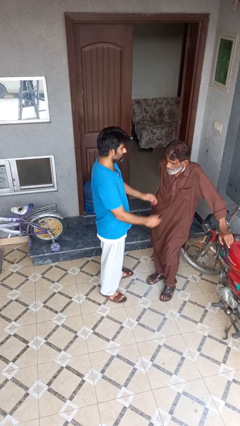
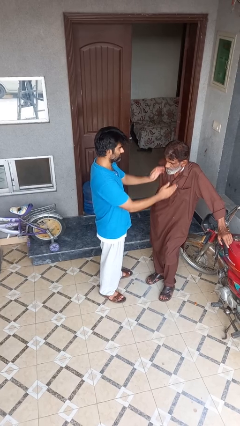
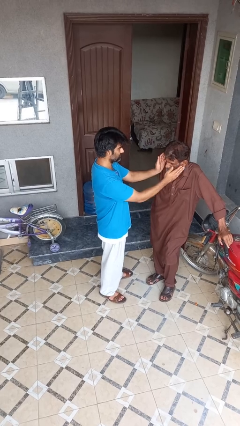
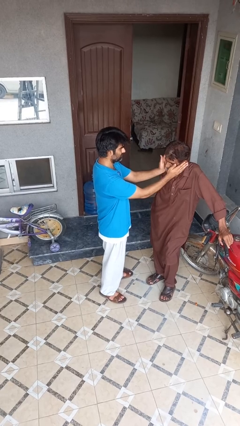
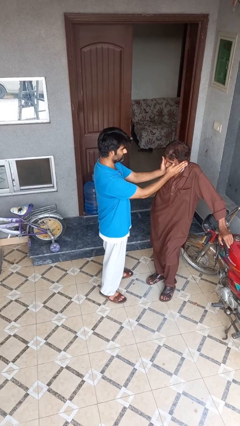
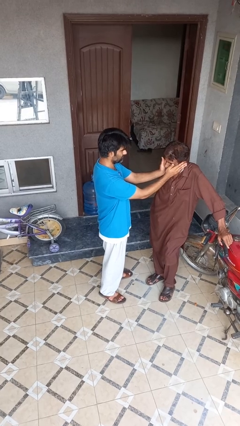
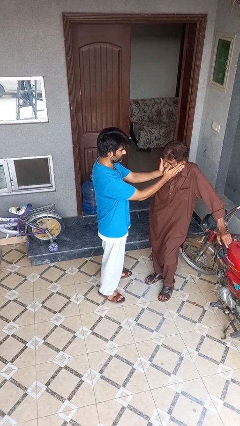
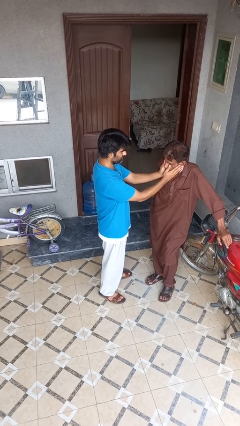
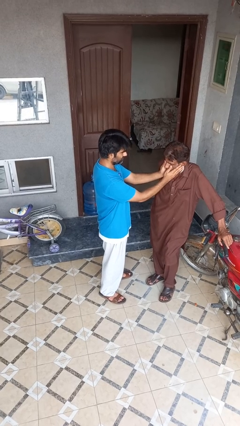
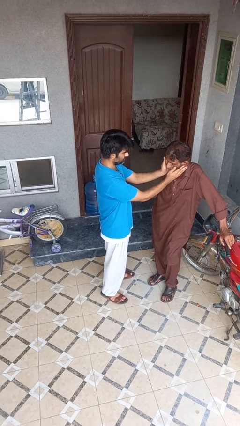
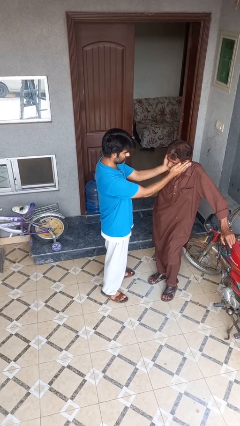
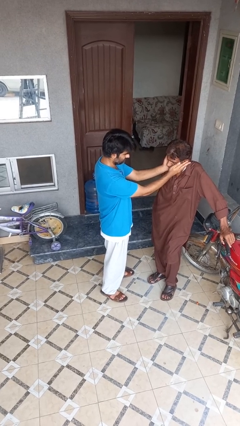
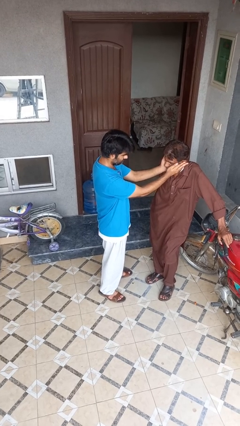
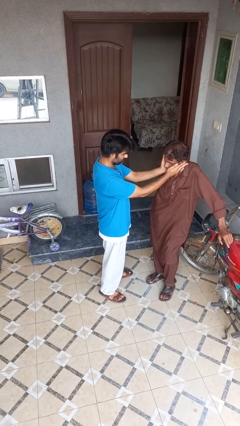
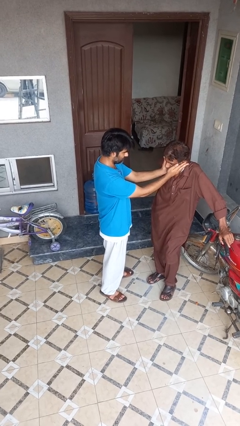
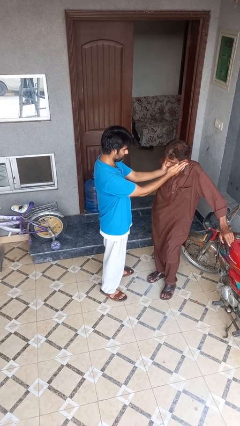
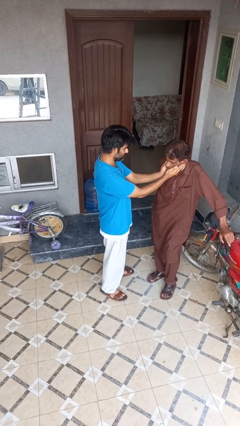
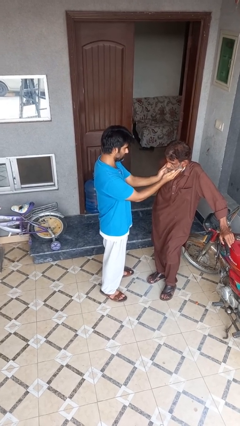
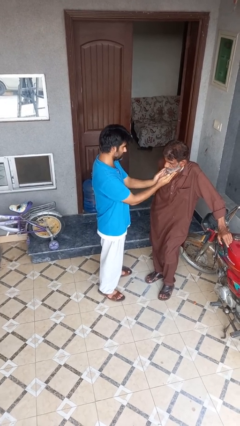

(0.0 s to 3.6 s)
person touches face of person

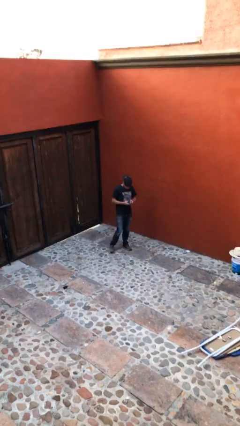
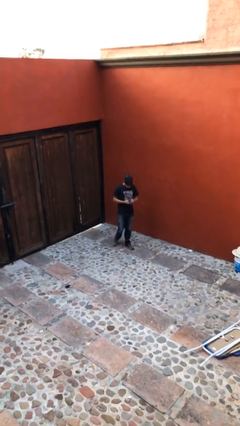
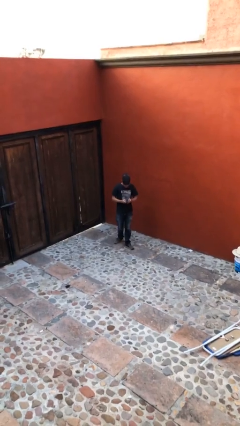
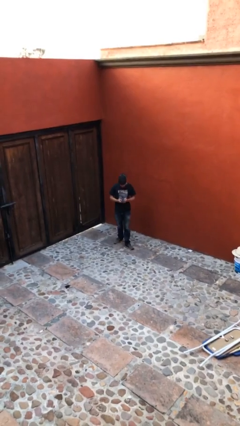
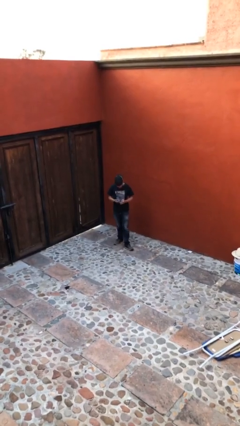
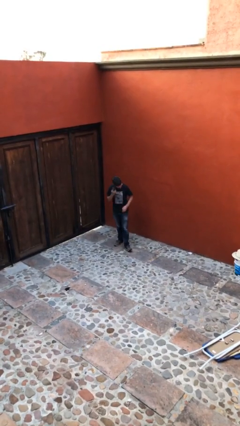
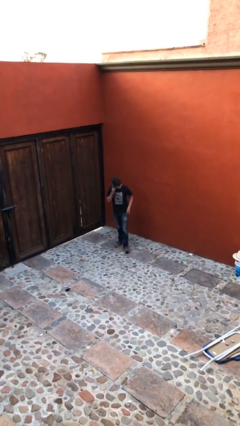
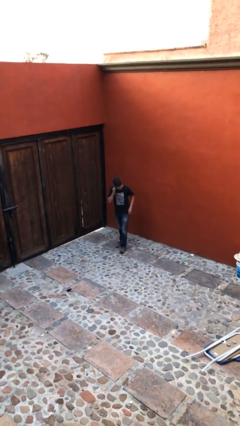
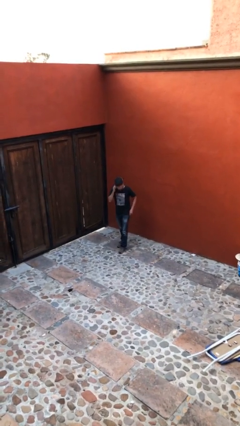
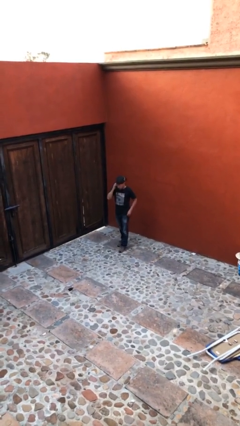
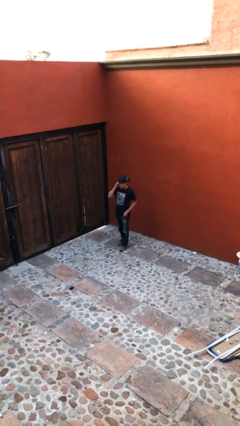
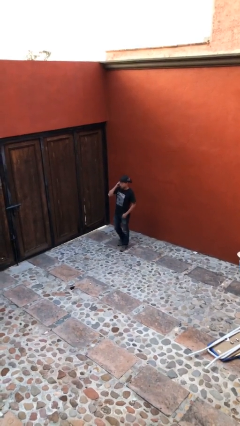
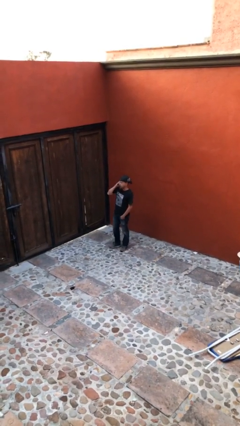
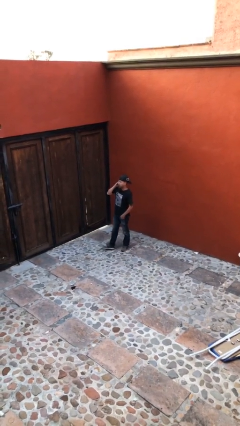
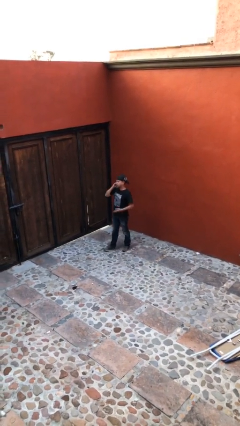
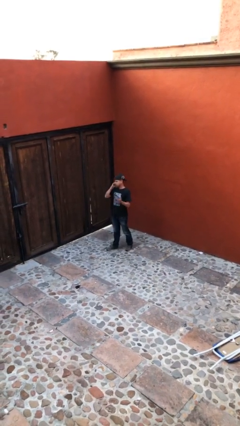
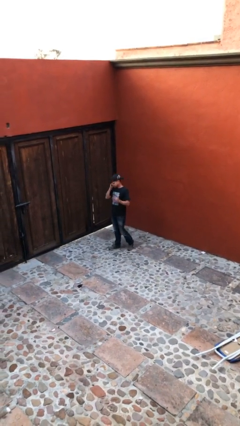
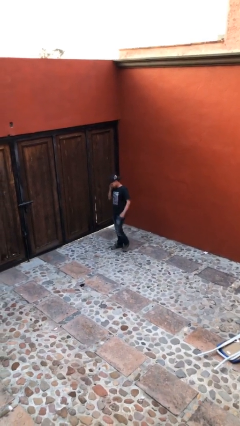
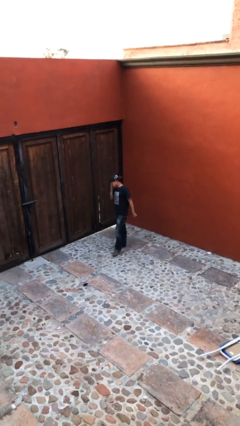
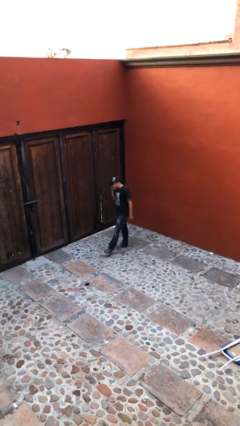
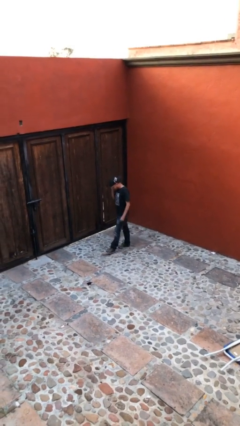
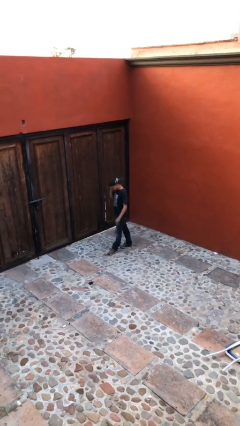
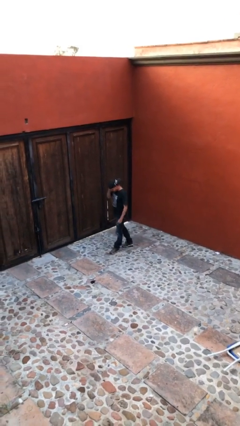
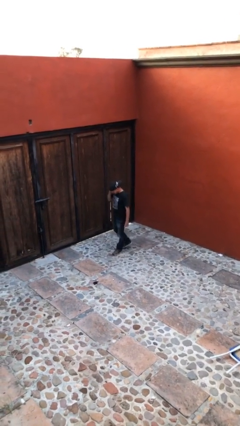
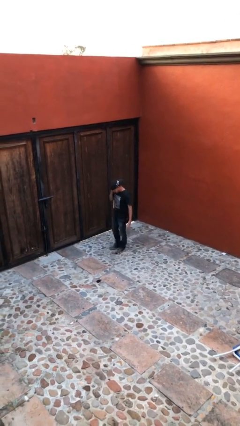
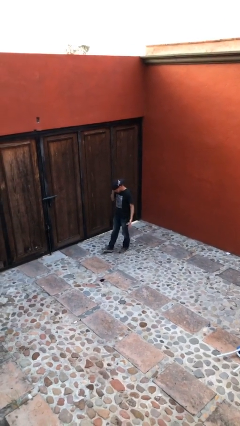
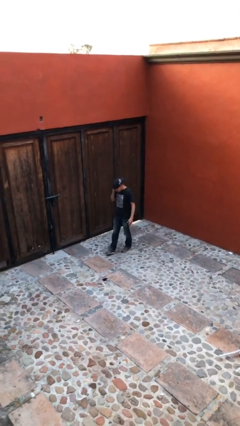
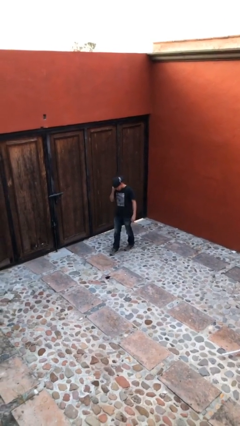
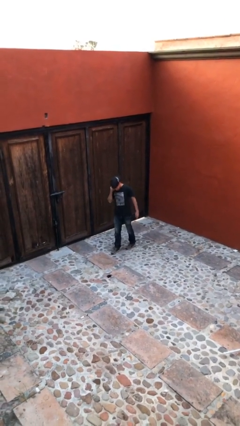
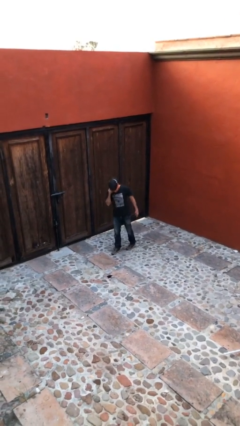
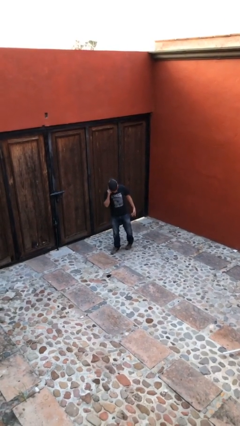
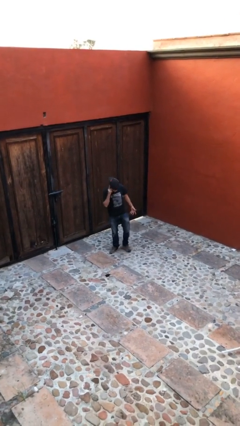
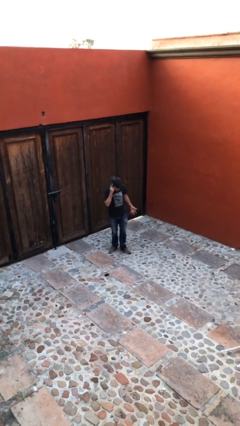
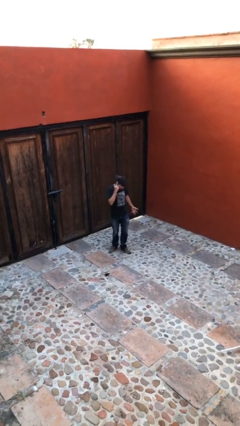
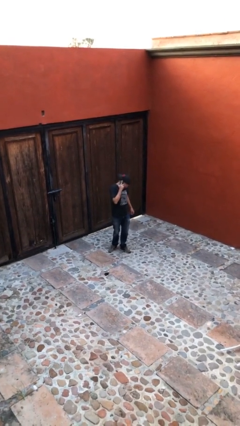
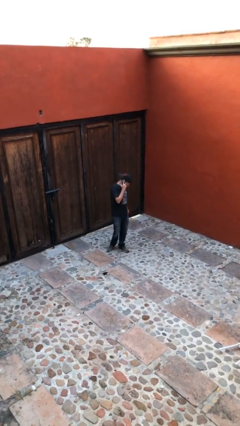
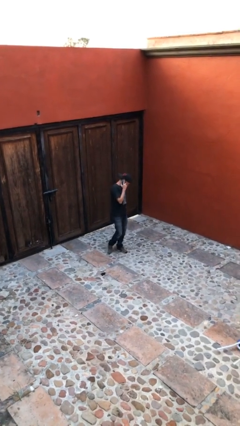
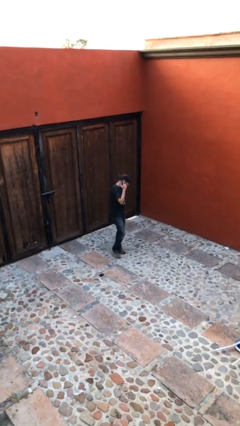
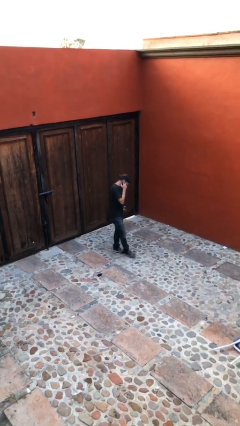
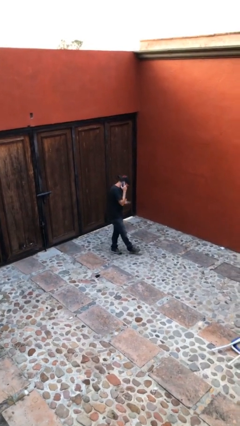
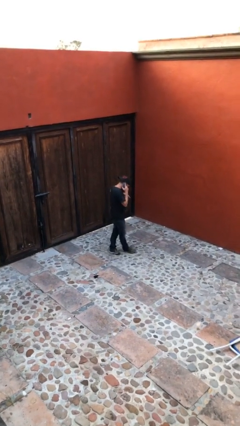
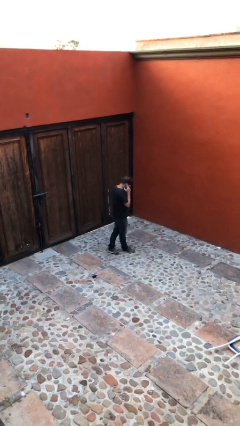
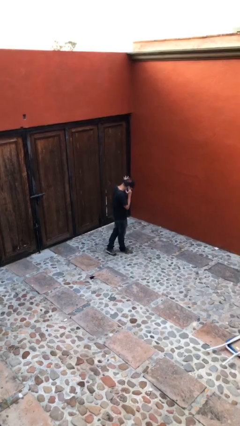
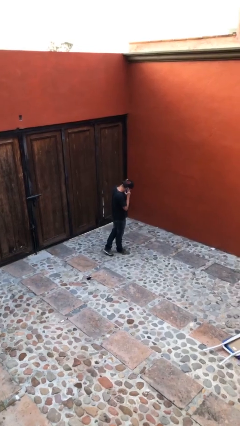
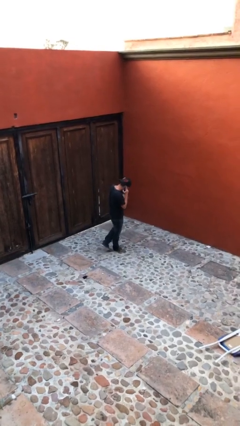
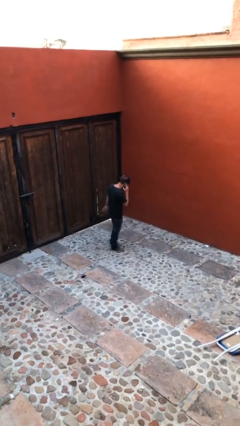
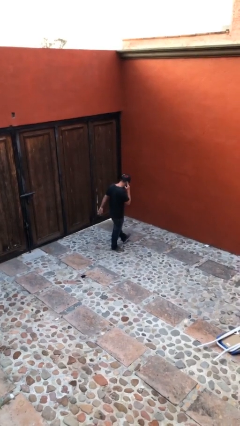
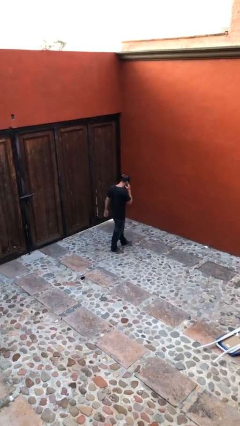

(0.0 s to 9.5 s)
person talks on phone

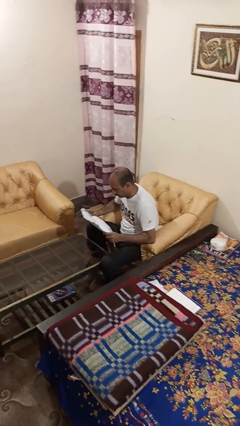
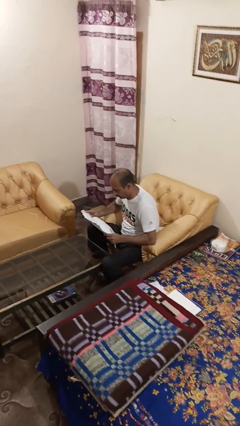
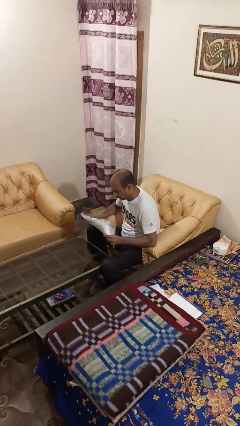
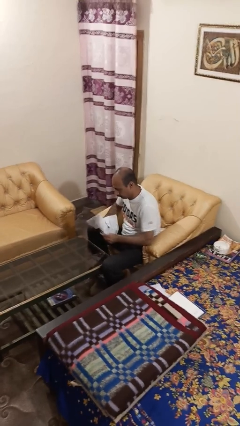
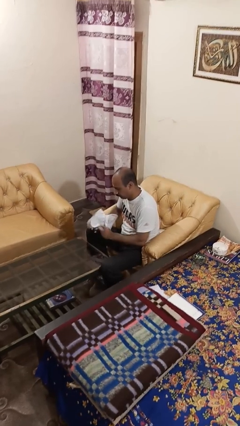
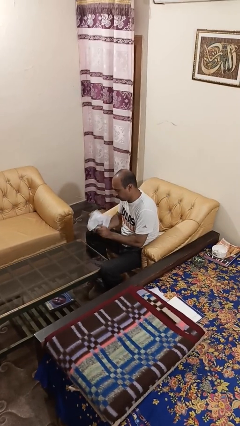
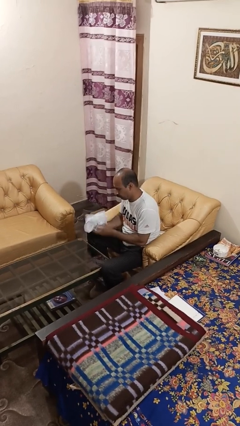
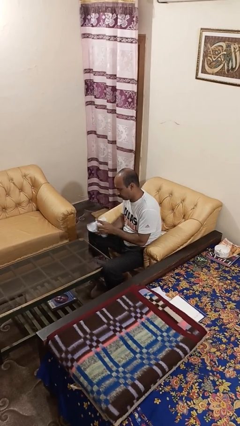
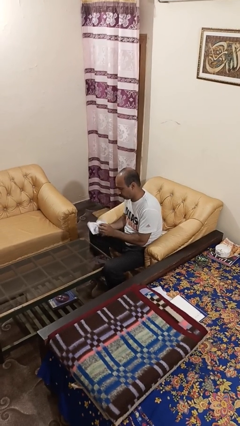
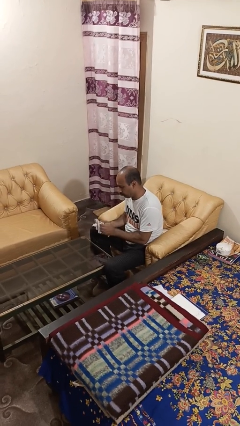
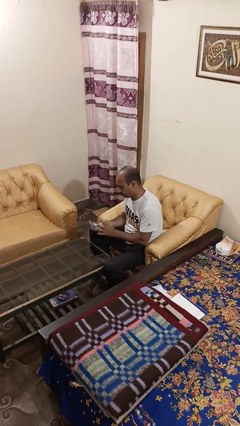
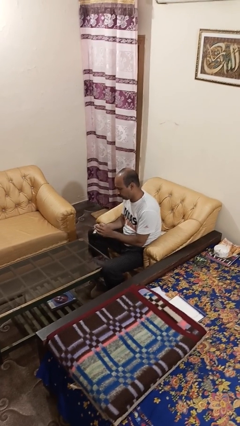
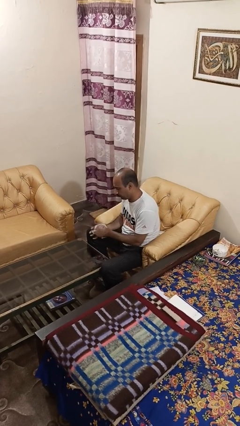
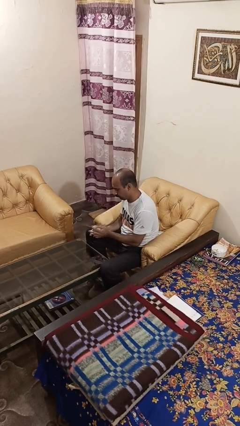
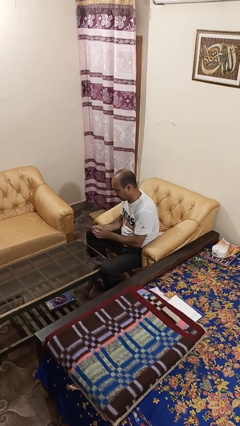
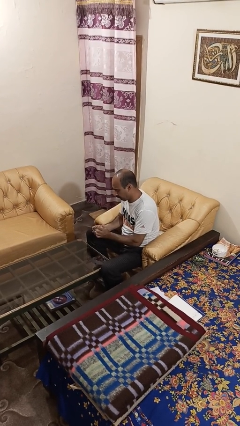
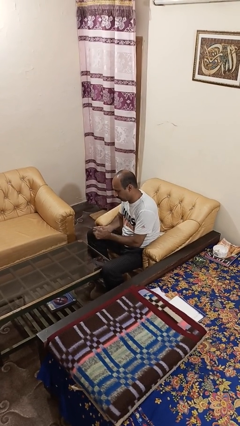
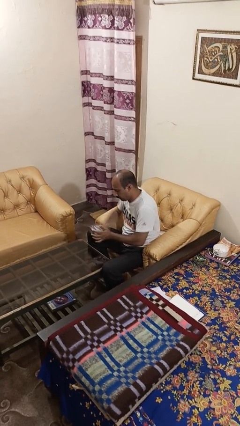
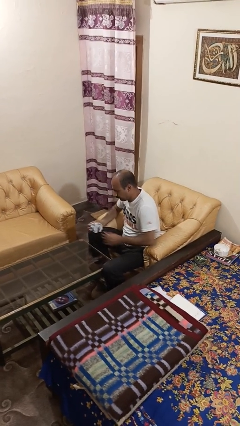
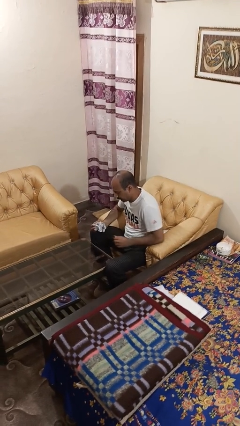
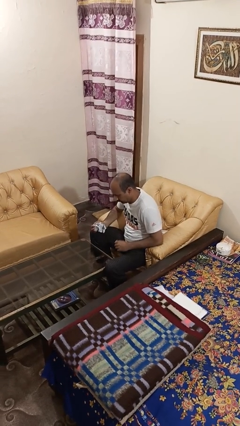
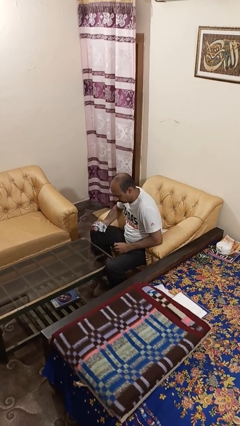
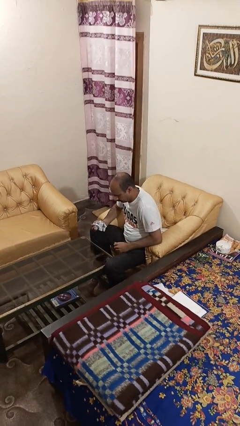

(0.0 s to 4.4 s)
person crumples paper

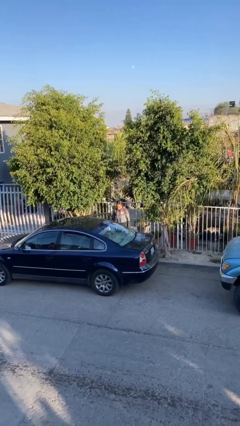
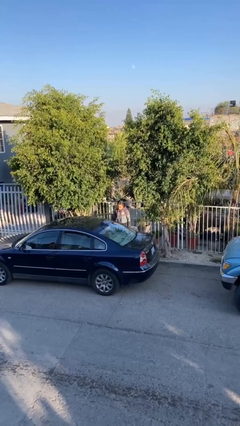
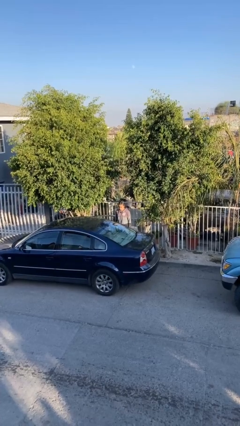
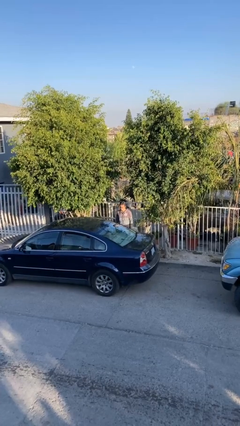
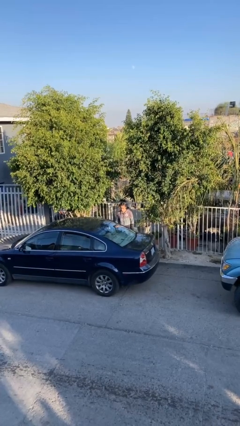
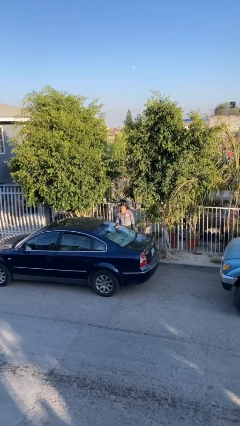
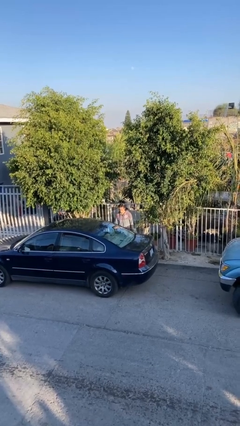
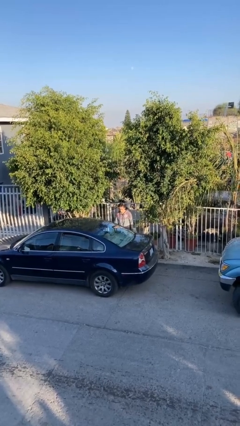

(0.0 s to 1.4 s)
person closes car door
